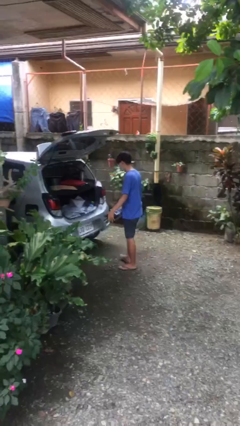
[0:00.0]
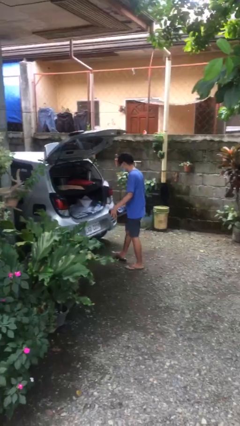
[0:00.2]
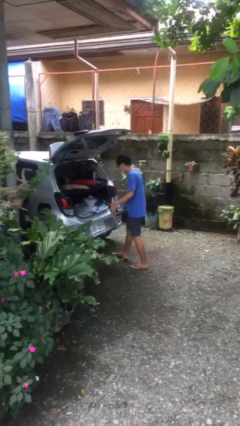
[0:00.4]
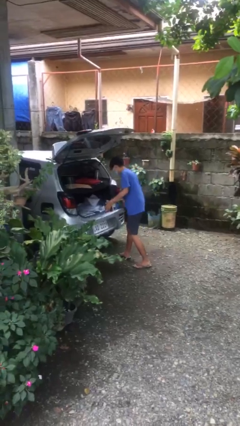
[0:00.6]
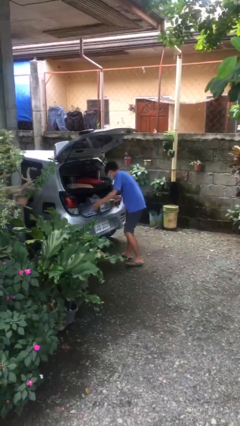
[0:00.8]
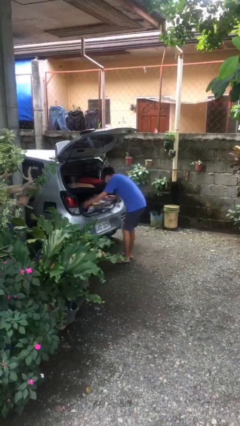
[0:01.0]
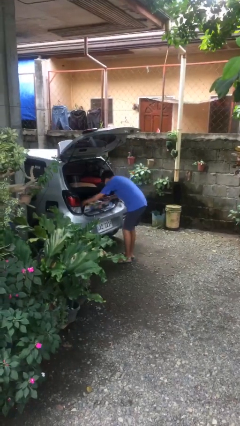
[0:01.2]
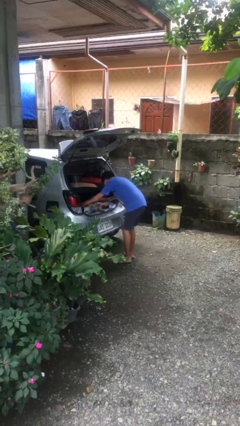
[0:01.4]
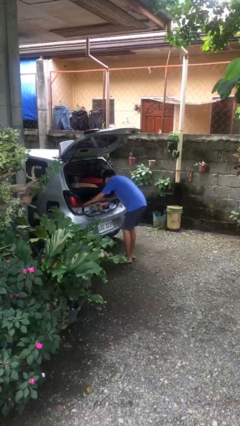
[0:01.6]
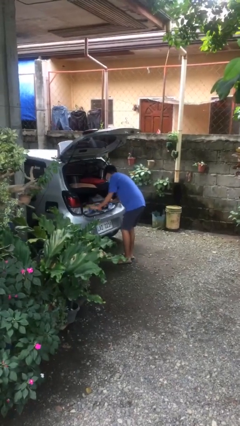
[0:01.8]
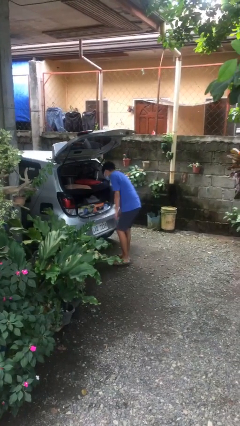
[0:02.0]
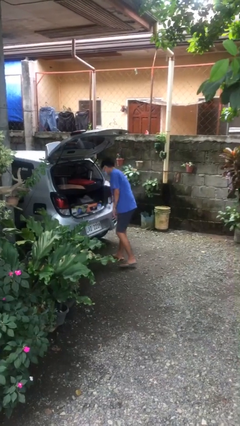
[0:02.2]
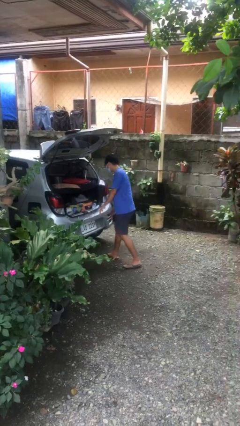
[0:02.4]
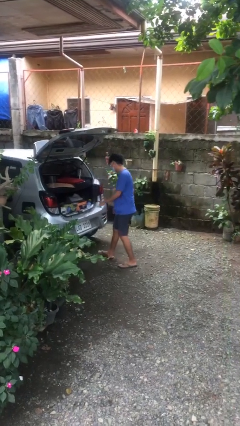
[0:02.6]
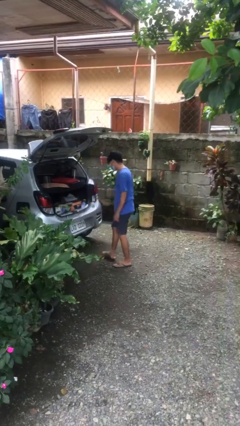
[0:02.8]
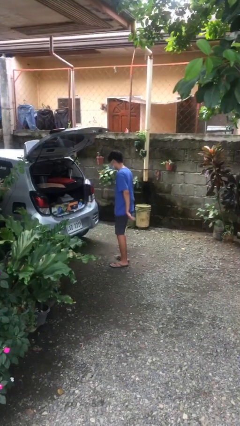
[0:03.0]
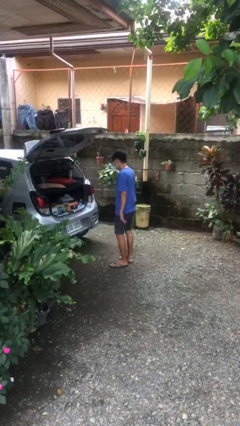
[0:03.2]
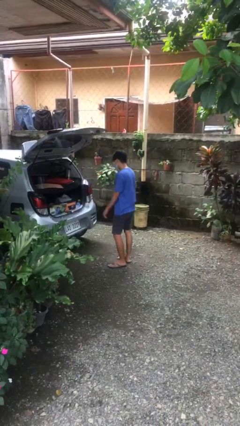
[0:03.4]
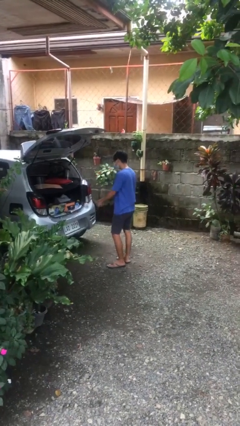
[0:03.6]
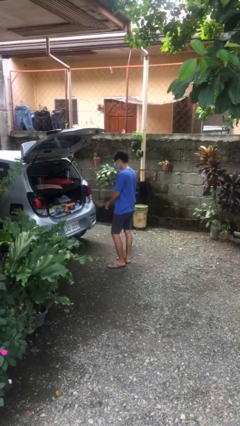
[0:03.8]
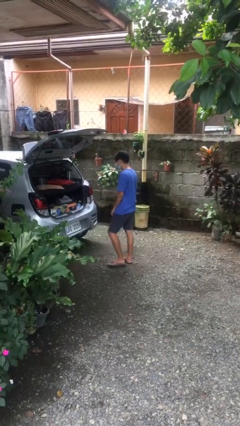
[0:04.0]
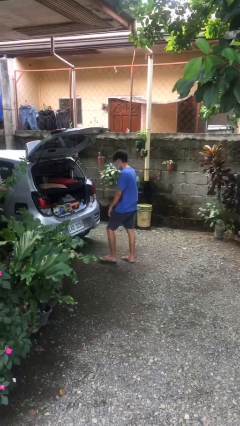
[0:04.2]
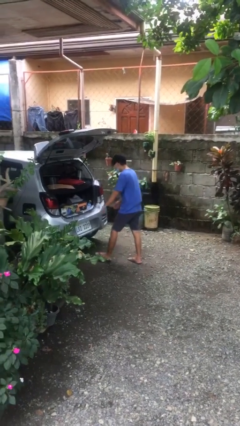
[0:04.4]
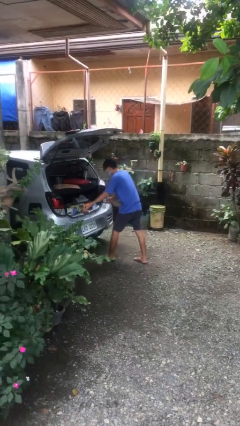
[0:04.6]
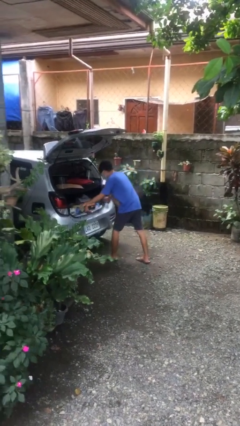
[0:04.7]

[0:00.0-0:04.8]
person loads car

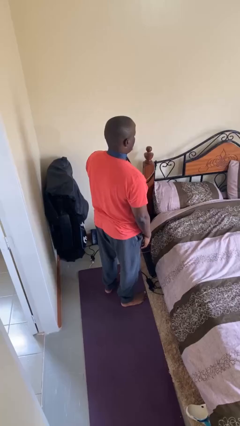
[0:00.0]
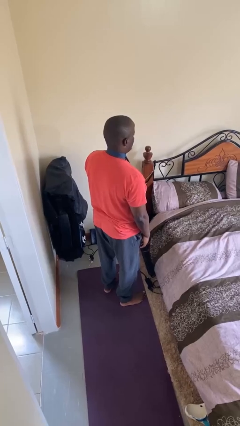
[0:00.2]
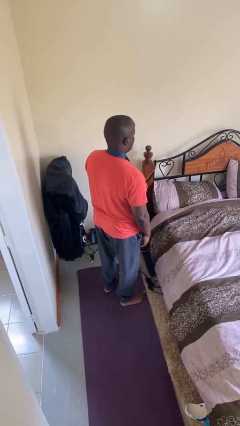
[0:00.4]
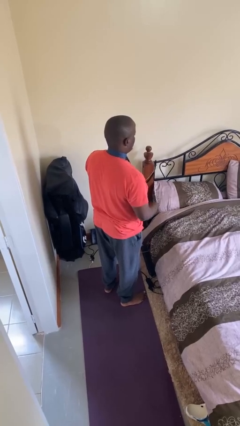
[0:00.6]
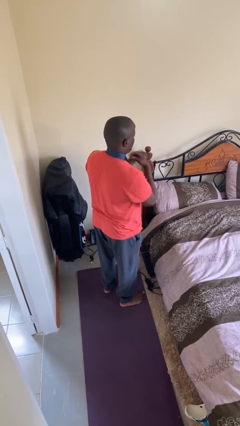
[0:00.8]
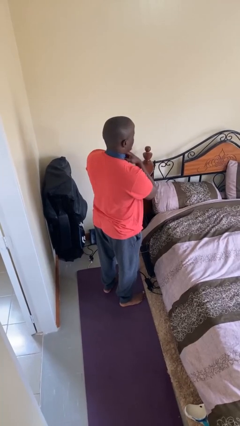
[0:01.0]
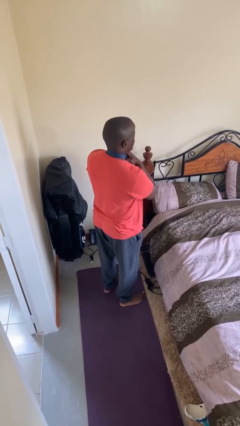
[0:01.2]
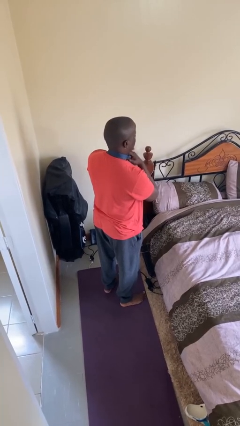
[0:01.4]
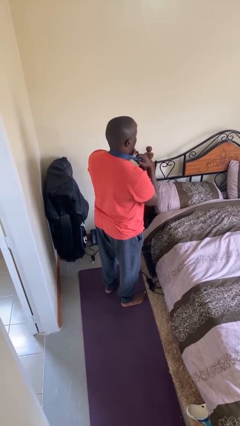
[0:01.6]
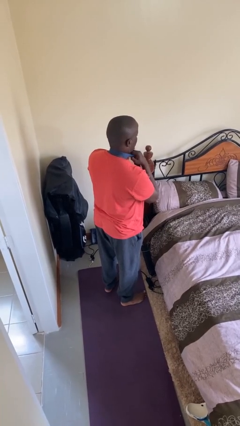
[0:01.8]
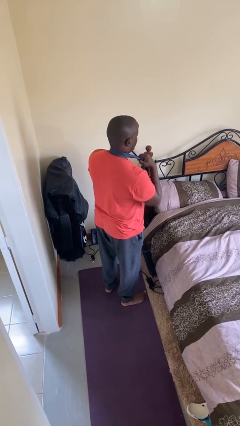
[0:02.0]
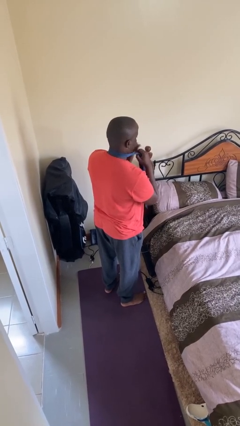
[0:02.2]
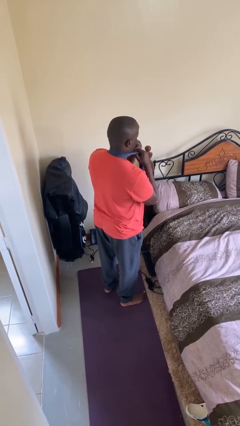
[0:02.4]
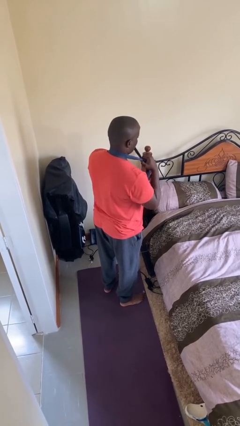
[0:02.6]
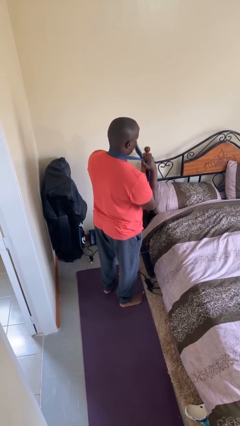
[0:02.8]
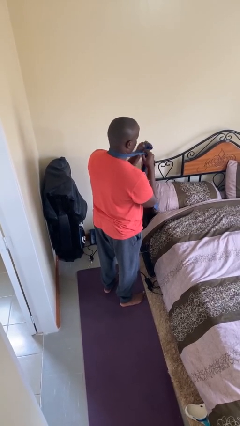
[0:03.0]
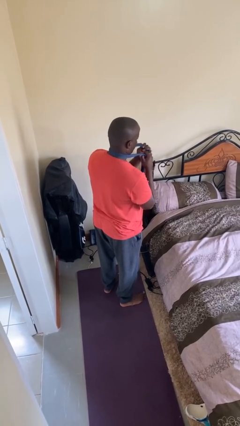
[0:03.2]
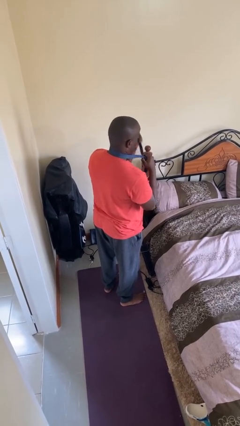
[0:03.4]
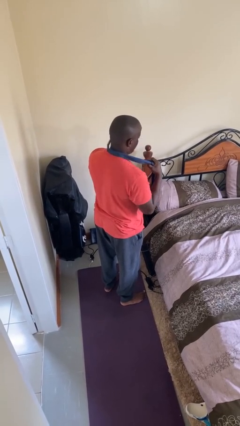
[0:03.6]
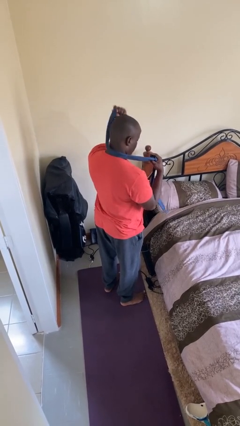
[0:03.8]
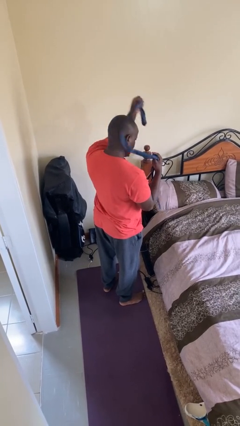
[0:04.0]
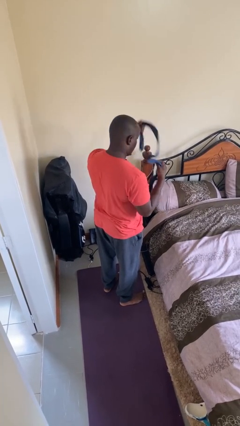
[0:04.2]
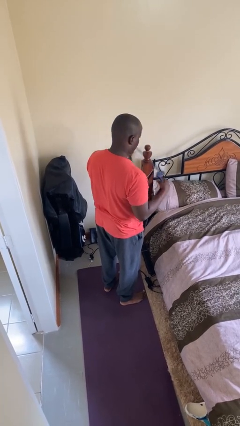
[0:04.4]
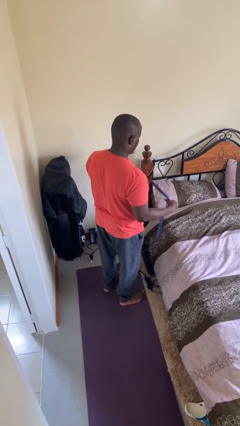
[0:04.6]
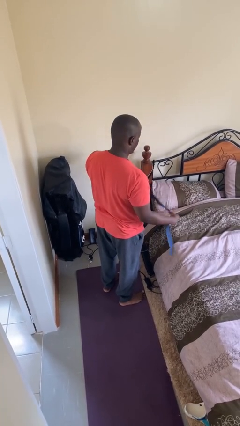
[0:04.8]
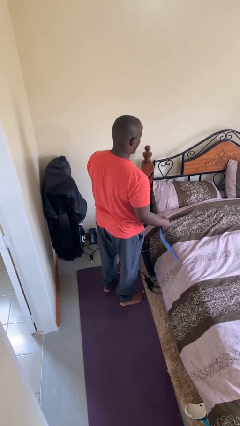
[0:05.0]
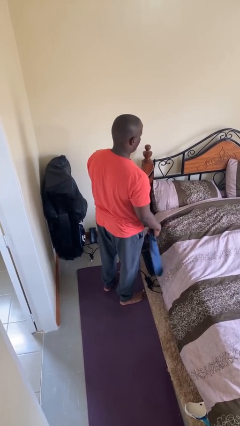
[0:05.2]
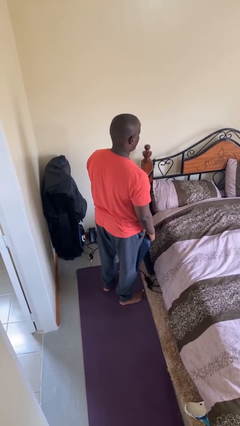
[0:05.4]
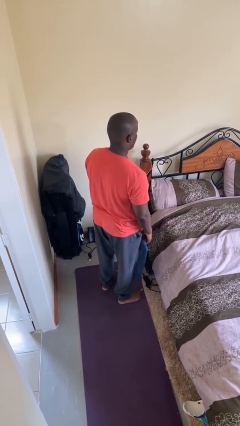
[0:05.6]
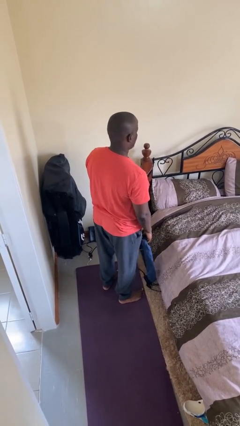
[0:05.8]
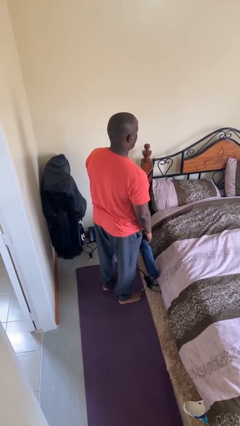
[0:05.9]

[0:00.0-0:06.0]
person takes off necktie

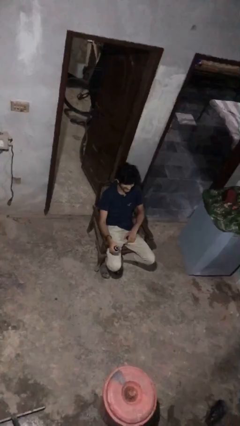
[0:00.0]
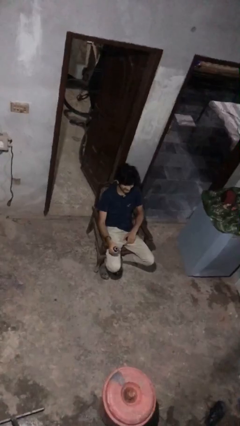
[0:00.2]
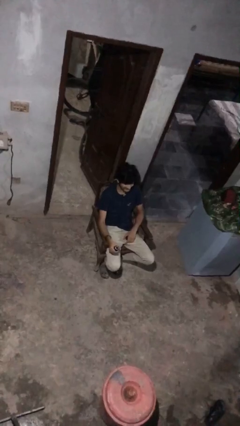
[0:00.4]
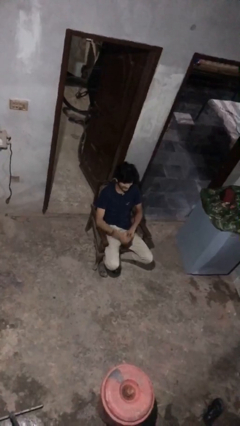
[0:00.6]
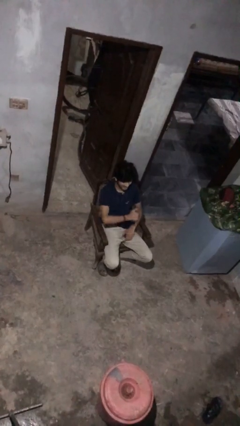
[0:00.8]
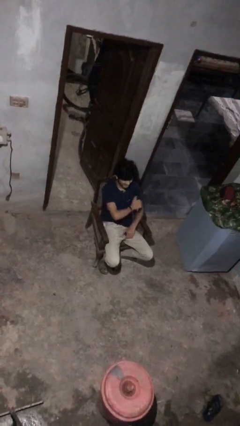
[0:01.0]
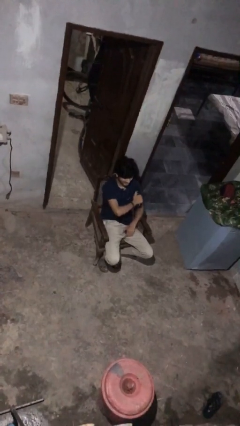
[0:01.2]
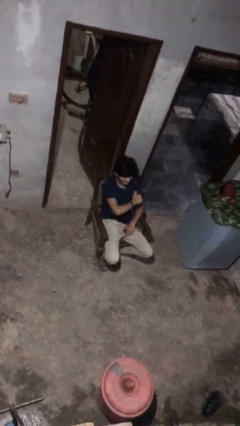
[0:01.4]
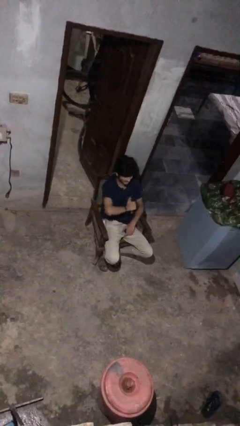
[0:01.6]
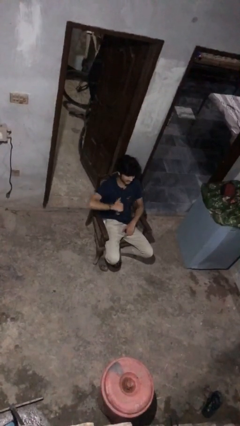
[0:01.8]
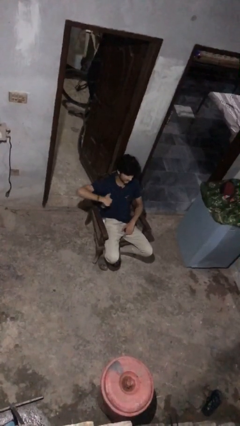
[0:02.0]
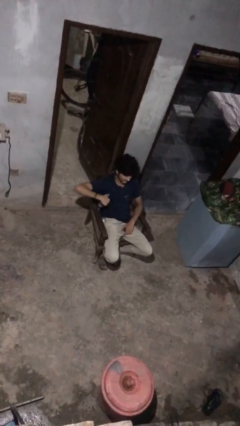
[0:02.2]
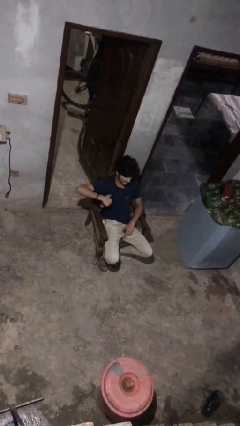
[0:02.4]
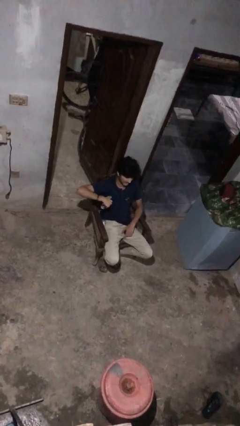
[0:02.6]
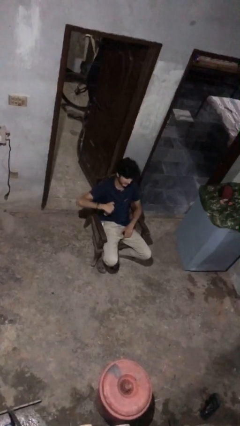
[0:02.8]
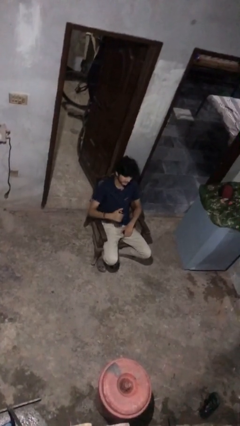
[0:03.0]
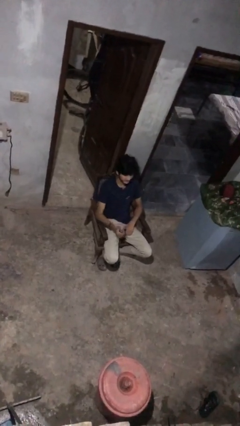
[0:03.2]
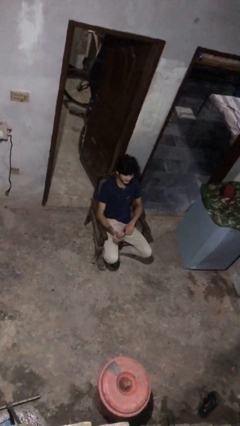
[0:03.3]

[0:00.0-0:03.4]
person applies deodorant

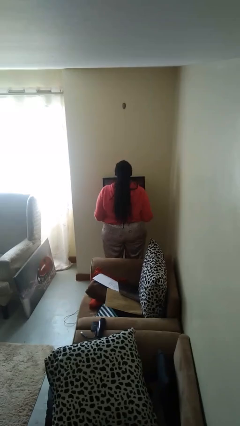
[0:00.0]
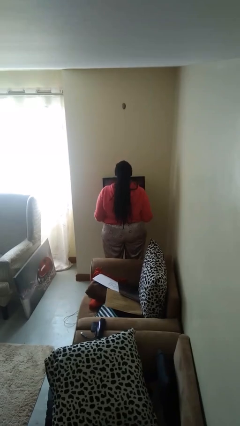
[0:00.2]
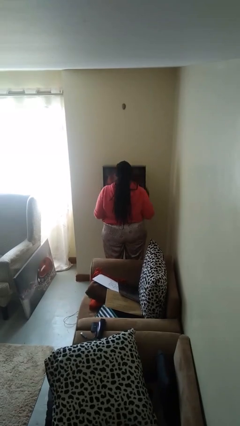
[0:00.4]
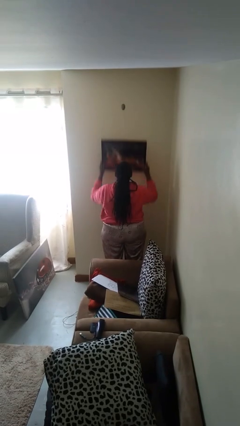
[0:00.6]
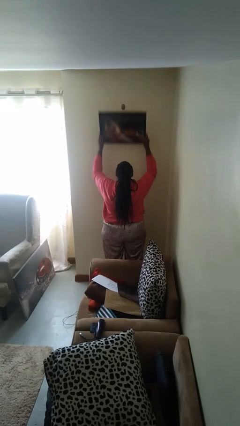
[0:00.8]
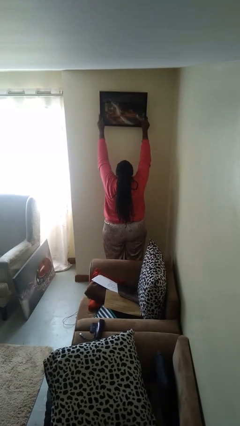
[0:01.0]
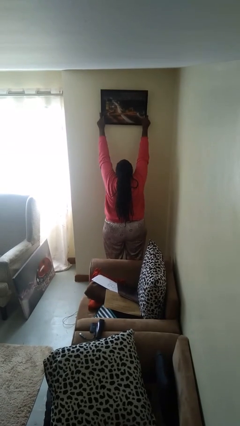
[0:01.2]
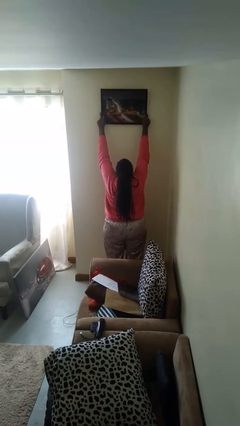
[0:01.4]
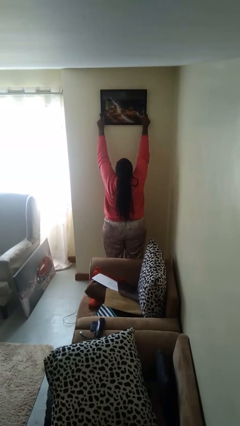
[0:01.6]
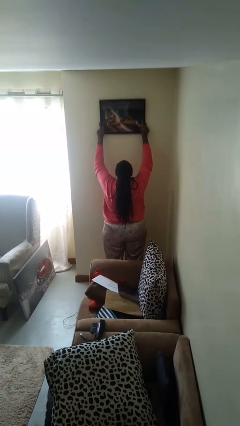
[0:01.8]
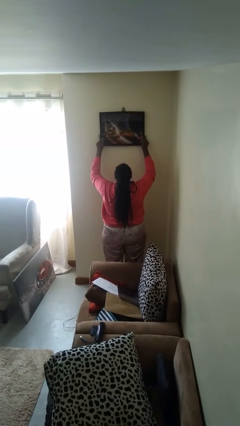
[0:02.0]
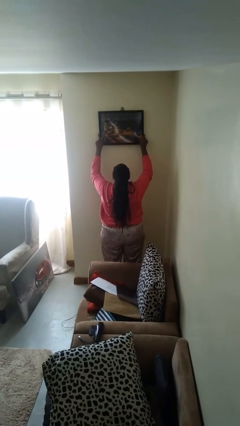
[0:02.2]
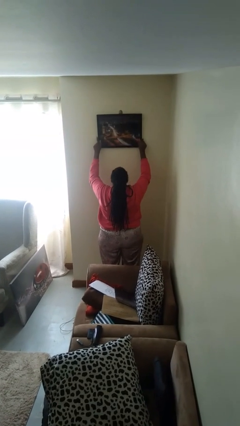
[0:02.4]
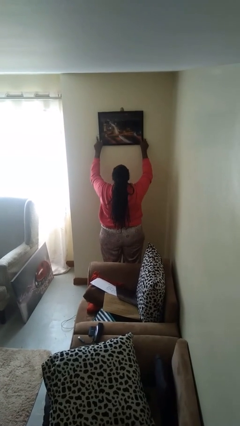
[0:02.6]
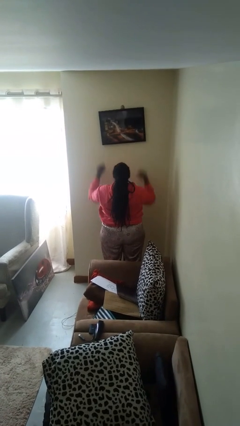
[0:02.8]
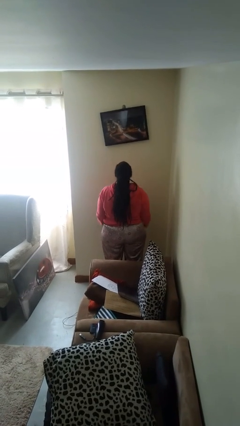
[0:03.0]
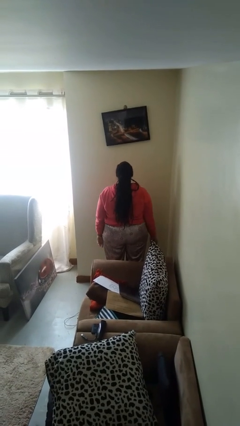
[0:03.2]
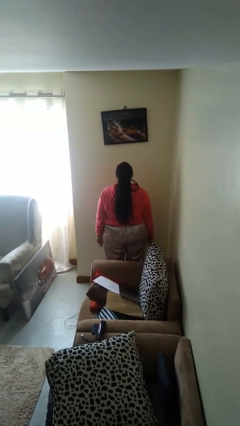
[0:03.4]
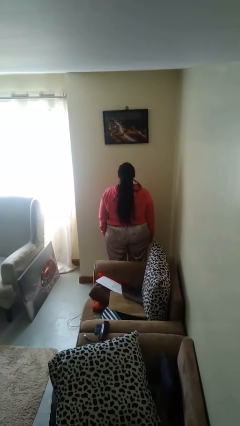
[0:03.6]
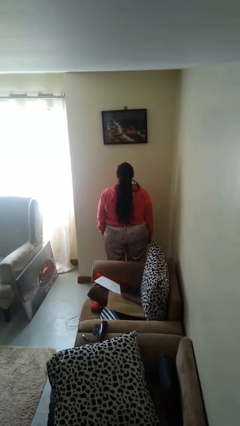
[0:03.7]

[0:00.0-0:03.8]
person puts up picture frame
